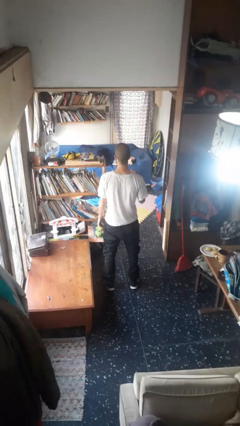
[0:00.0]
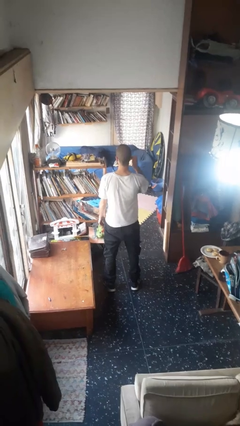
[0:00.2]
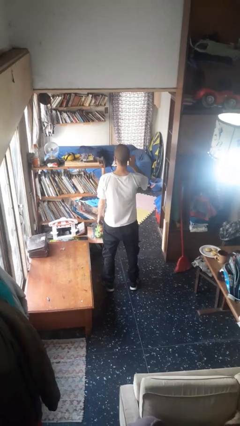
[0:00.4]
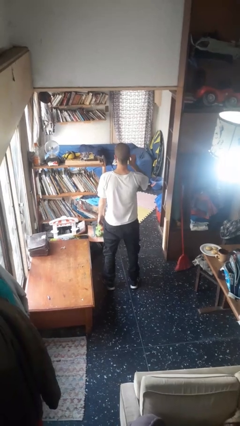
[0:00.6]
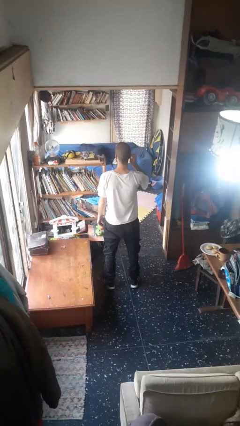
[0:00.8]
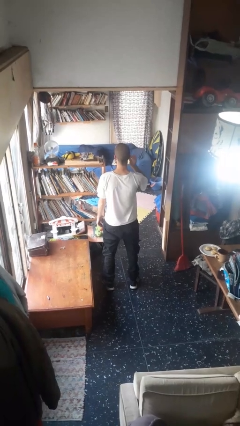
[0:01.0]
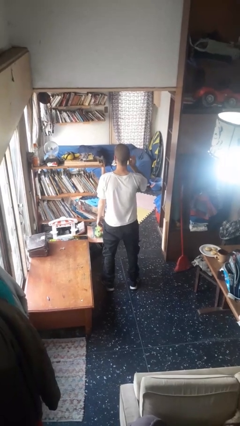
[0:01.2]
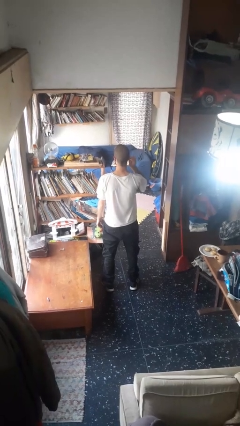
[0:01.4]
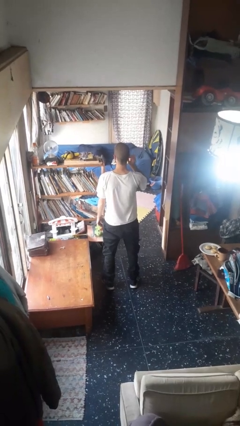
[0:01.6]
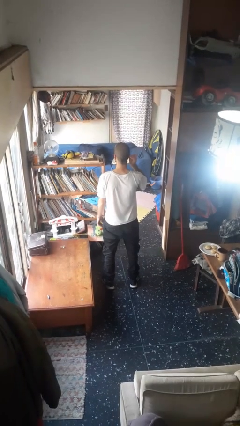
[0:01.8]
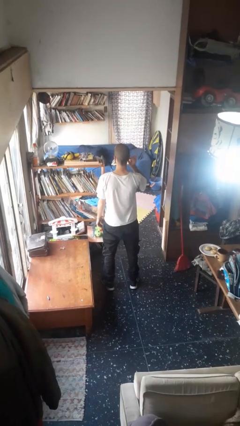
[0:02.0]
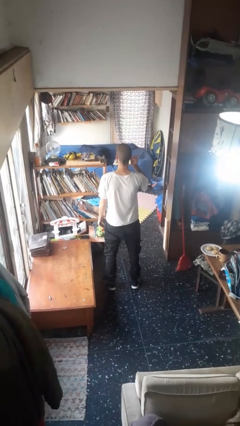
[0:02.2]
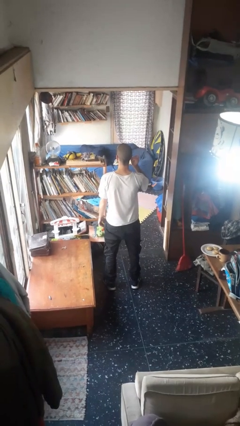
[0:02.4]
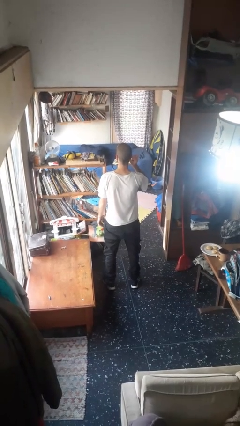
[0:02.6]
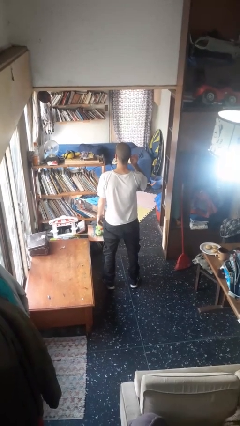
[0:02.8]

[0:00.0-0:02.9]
person touches earlobe

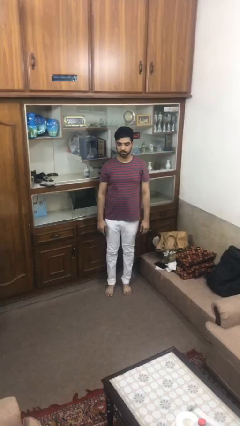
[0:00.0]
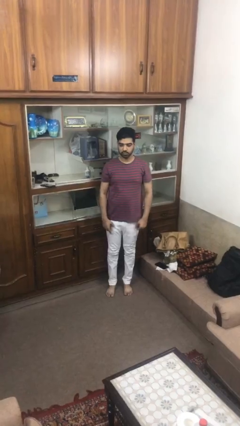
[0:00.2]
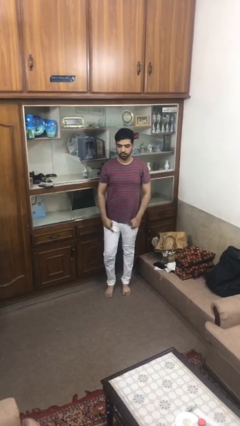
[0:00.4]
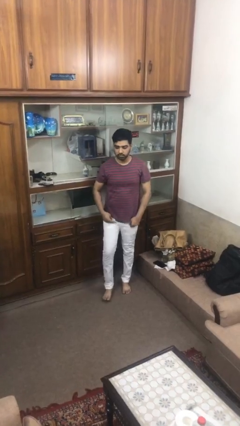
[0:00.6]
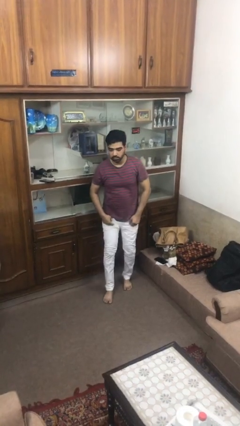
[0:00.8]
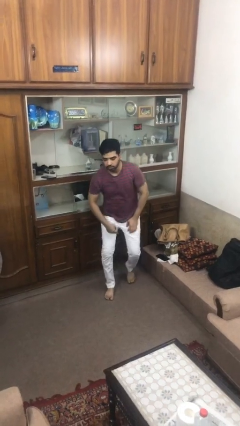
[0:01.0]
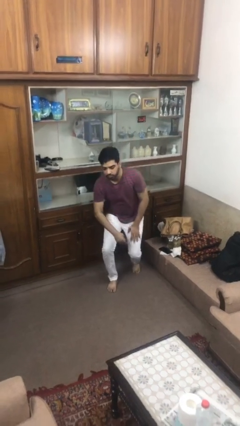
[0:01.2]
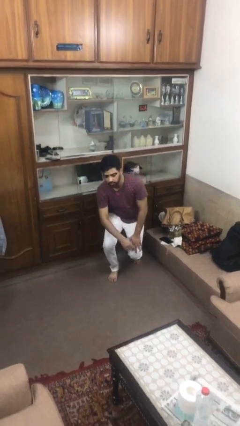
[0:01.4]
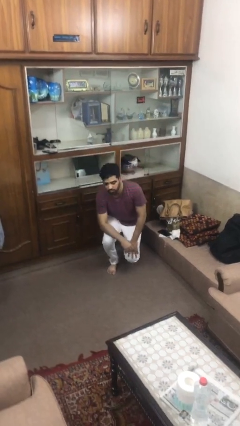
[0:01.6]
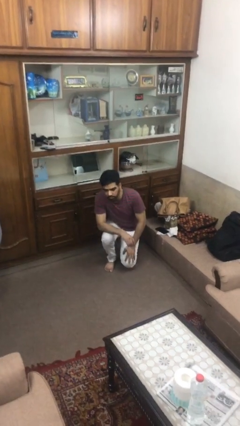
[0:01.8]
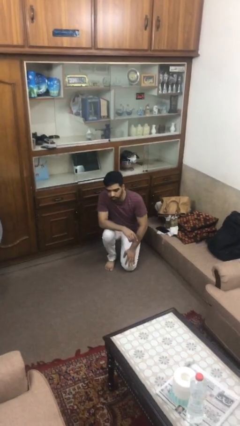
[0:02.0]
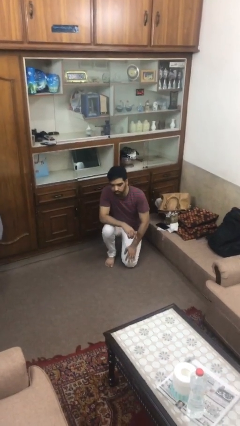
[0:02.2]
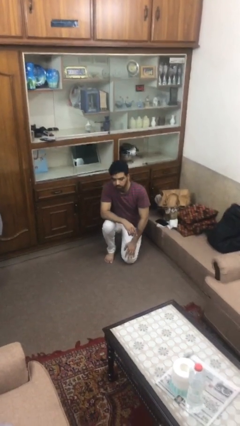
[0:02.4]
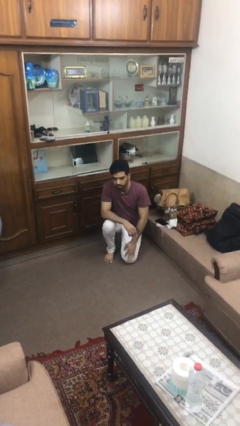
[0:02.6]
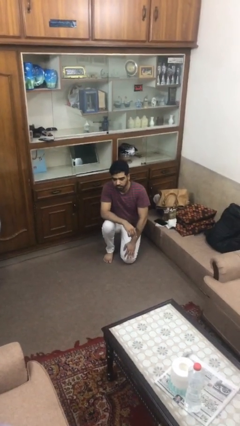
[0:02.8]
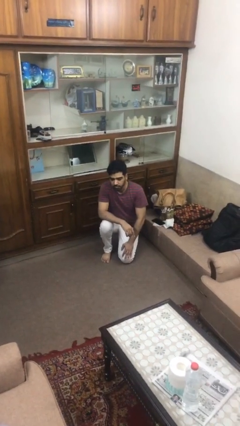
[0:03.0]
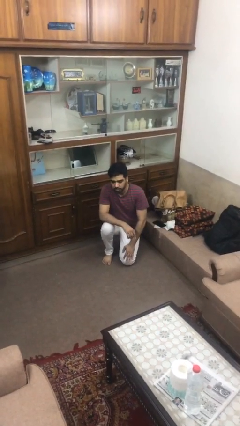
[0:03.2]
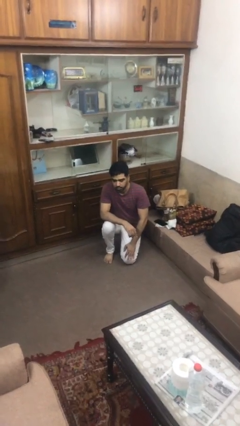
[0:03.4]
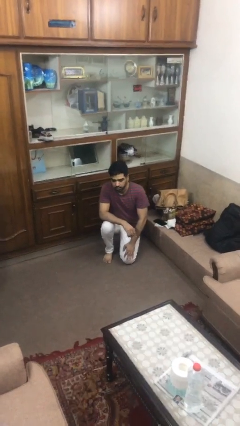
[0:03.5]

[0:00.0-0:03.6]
person kneels

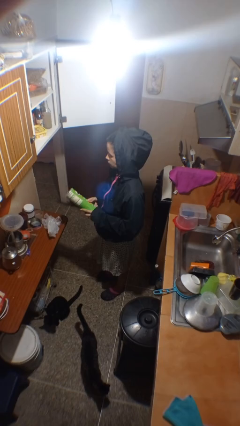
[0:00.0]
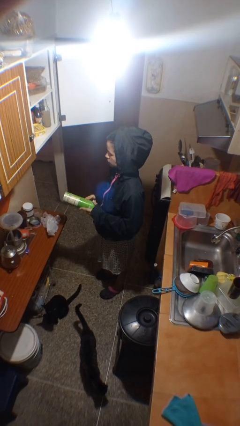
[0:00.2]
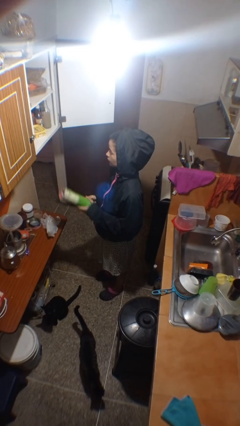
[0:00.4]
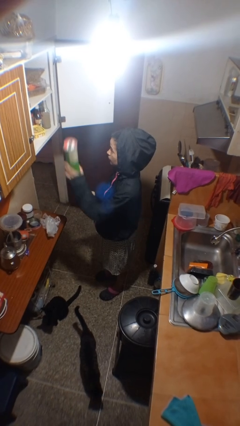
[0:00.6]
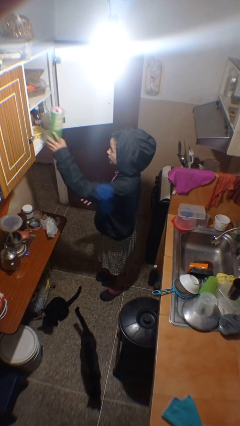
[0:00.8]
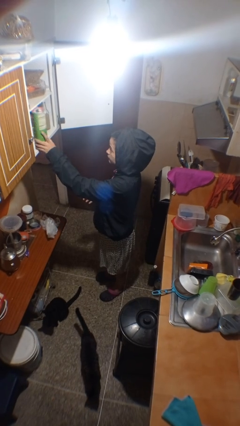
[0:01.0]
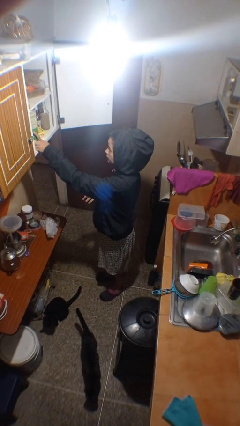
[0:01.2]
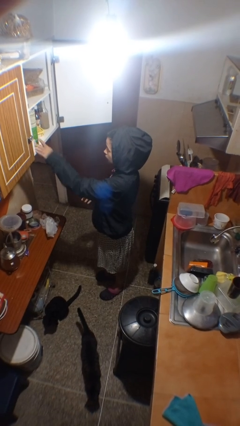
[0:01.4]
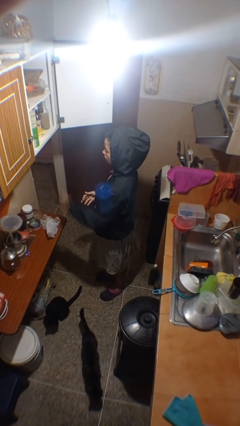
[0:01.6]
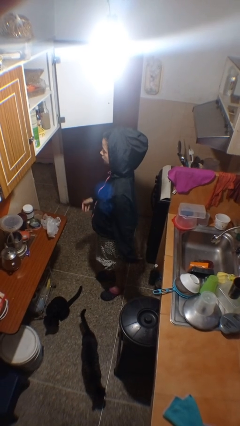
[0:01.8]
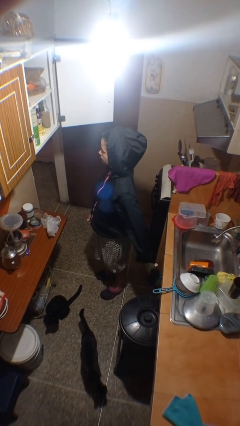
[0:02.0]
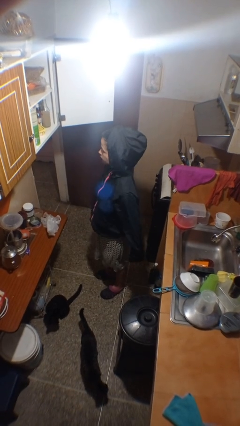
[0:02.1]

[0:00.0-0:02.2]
person puts object in cabinet

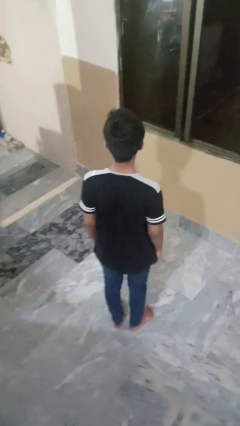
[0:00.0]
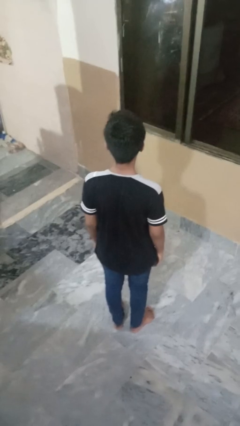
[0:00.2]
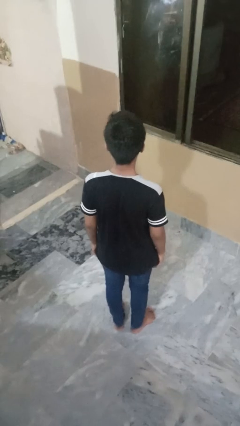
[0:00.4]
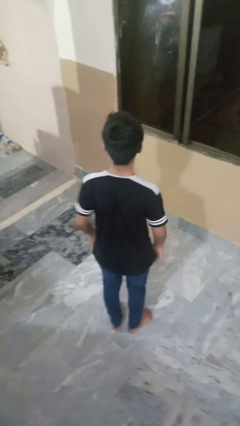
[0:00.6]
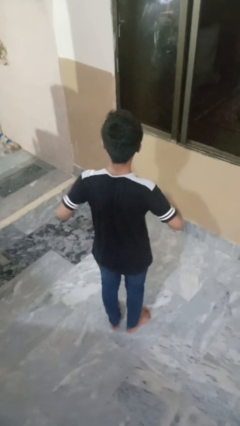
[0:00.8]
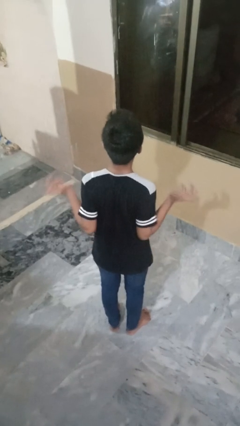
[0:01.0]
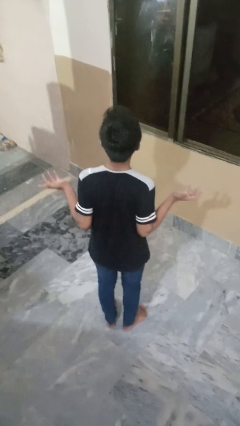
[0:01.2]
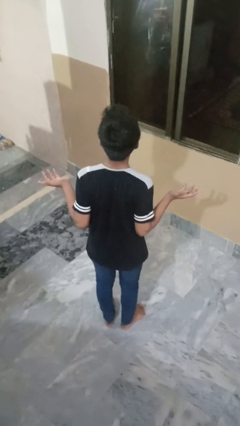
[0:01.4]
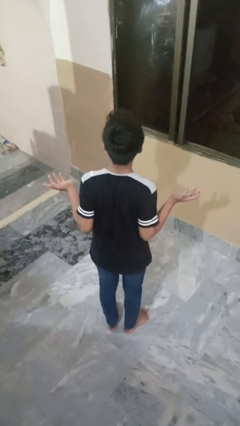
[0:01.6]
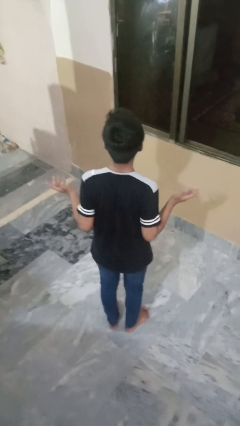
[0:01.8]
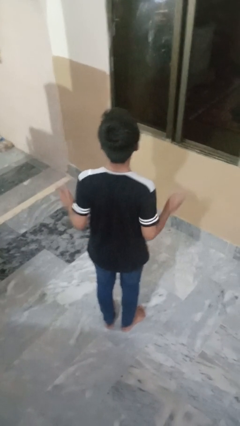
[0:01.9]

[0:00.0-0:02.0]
person shrugs

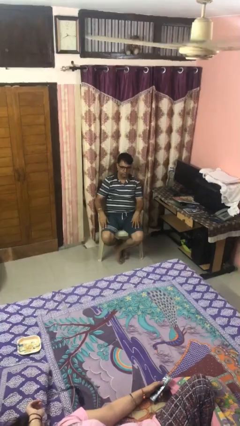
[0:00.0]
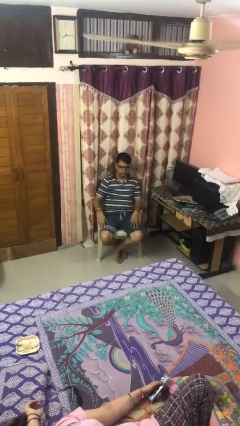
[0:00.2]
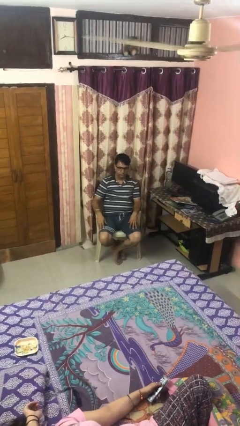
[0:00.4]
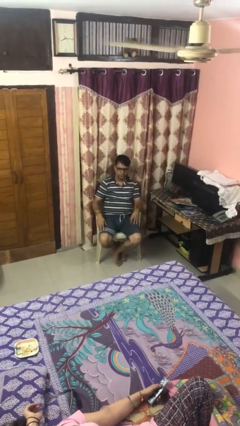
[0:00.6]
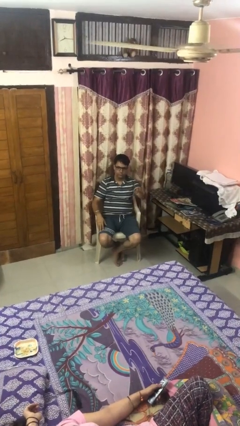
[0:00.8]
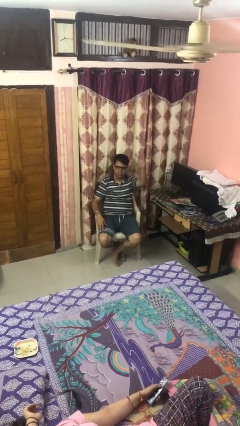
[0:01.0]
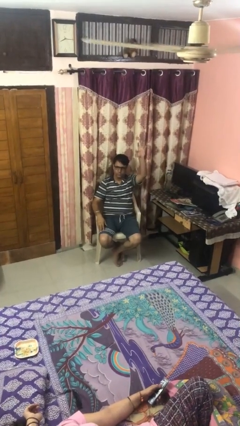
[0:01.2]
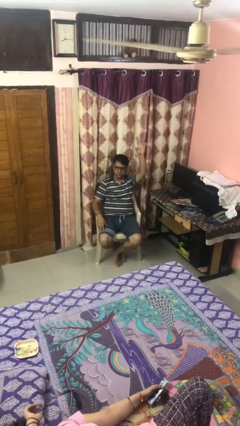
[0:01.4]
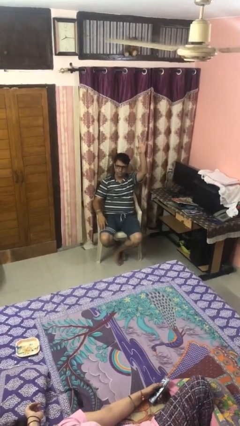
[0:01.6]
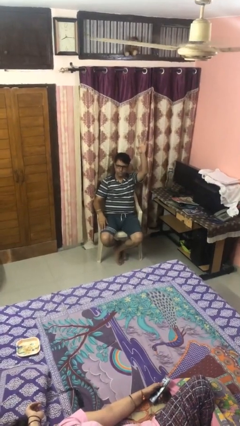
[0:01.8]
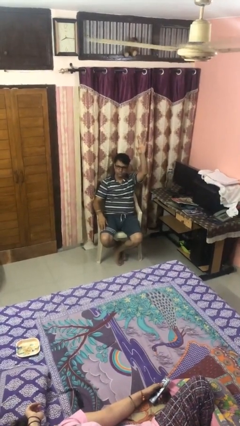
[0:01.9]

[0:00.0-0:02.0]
person gestures raise hand

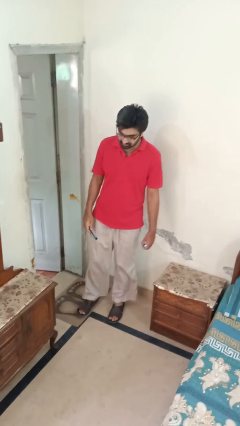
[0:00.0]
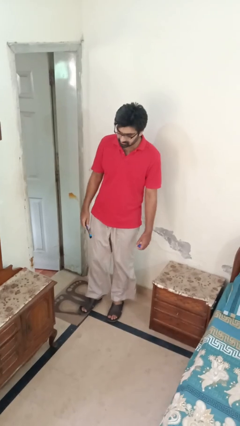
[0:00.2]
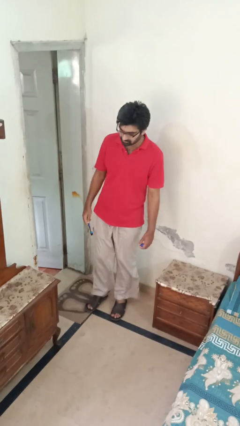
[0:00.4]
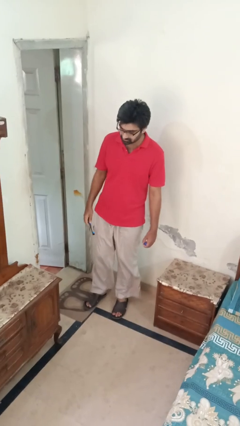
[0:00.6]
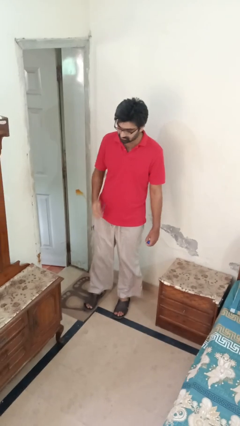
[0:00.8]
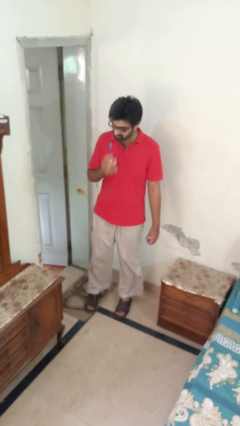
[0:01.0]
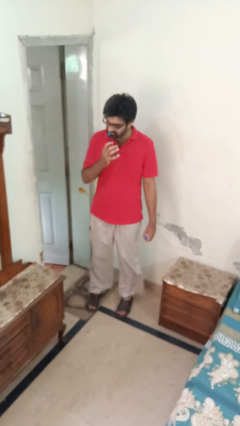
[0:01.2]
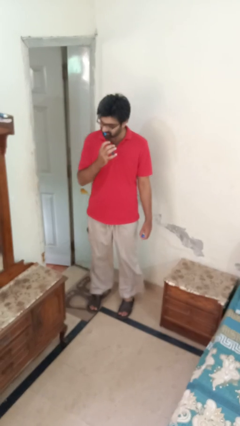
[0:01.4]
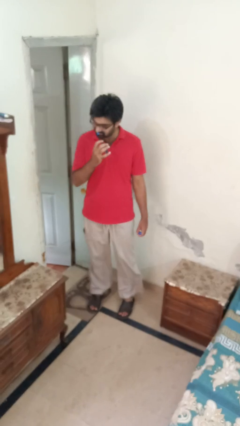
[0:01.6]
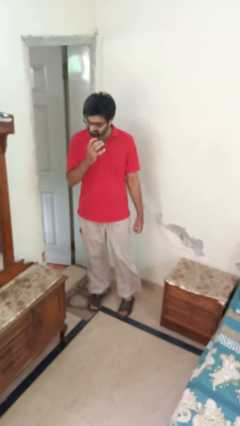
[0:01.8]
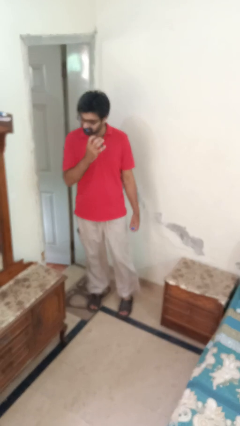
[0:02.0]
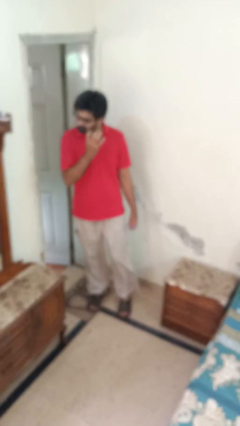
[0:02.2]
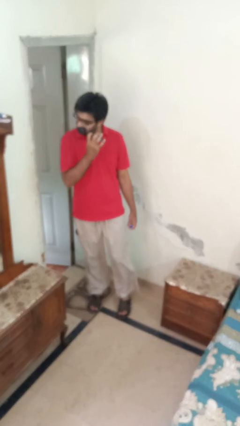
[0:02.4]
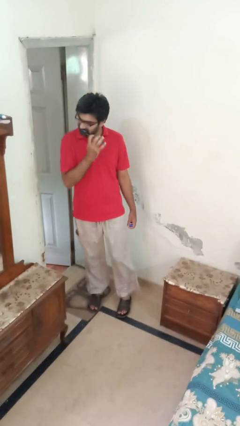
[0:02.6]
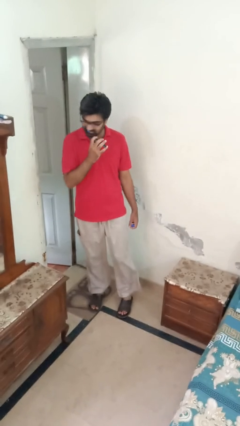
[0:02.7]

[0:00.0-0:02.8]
person brushes teeth

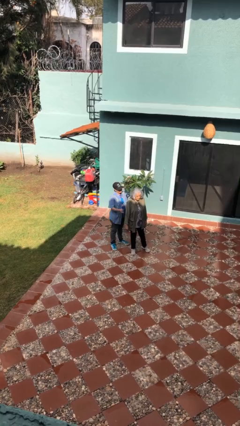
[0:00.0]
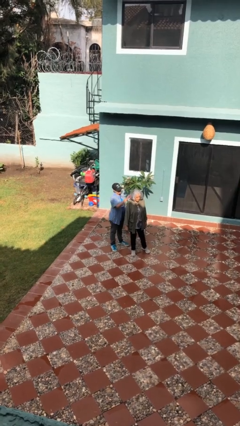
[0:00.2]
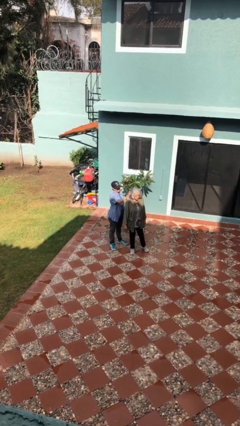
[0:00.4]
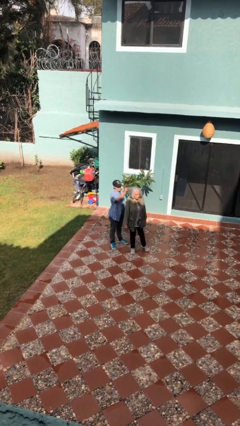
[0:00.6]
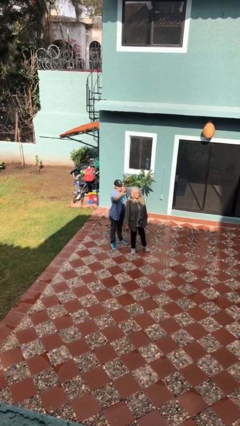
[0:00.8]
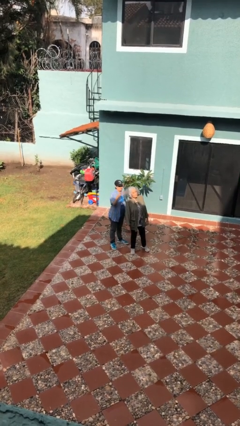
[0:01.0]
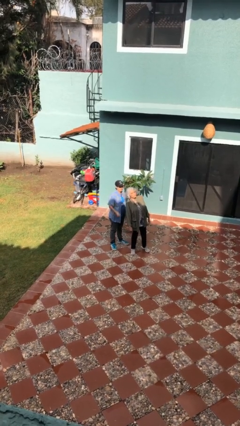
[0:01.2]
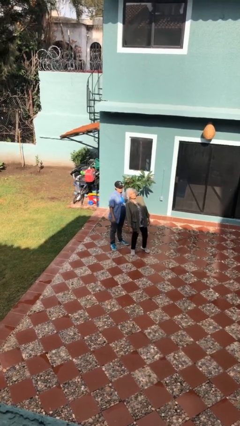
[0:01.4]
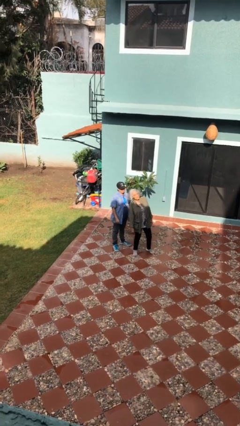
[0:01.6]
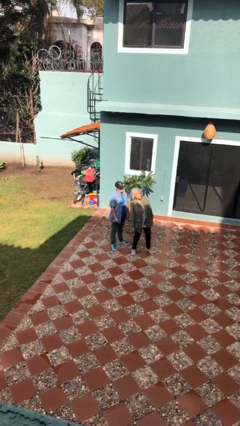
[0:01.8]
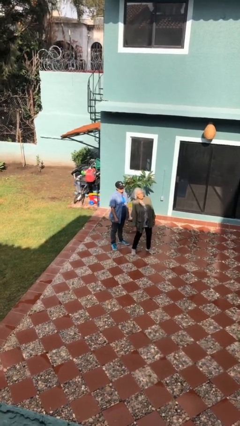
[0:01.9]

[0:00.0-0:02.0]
person grabs person by hair
